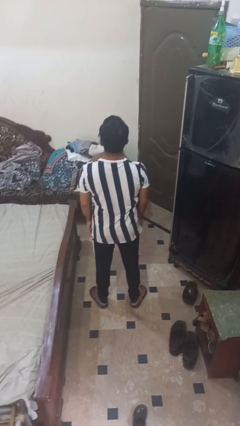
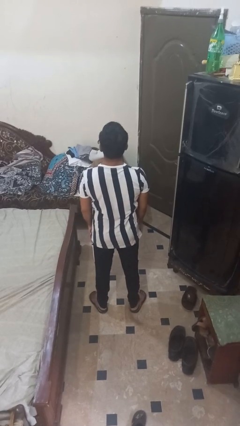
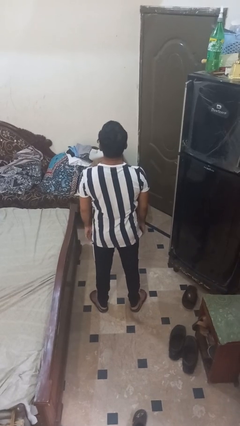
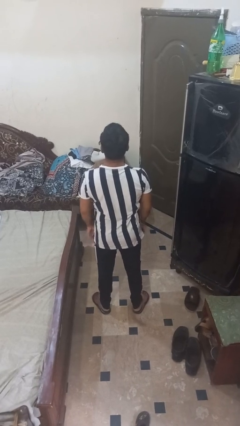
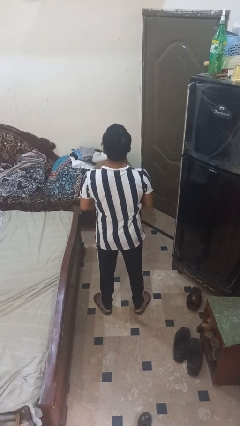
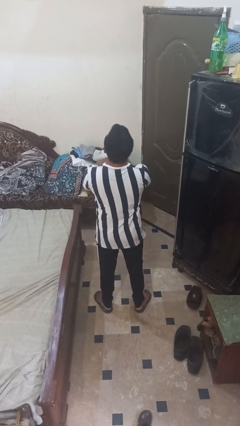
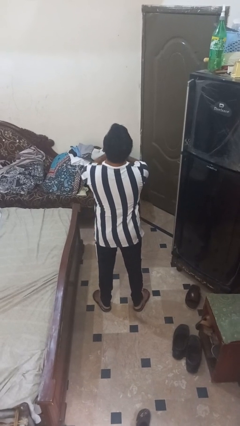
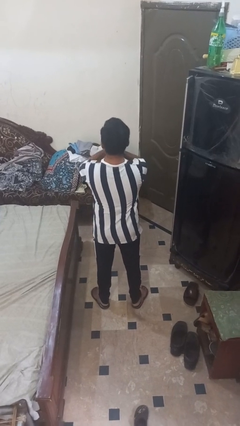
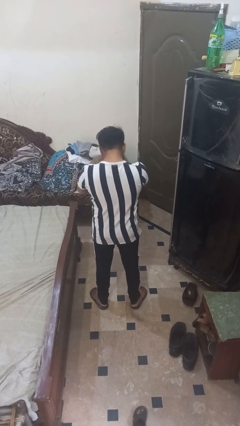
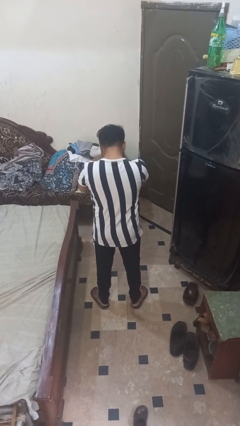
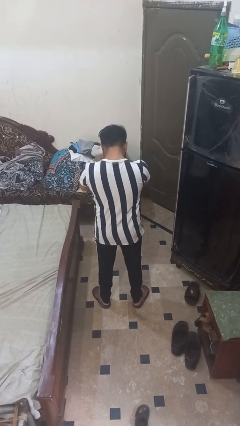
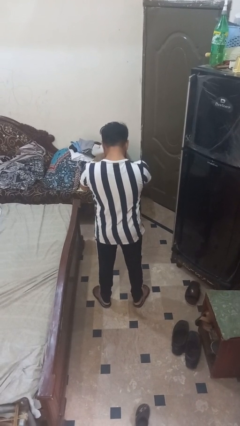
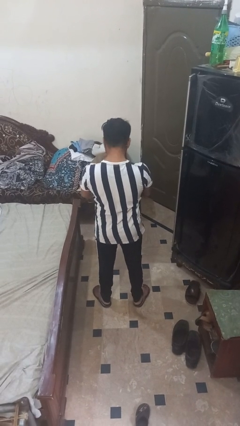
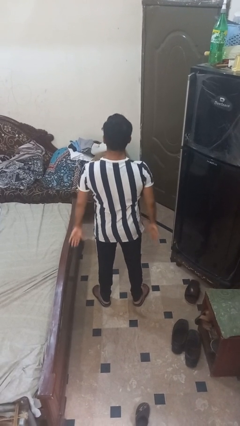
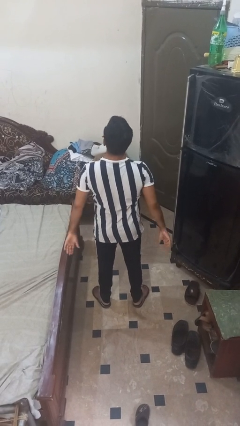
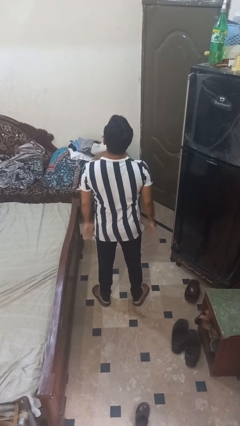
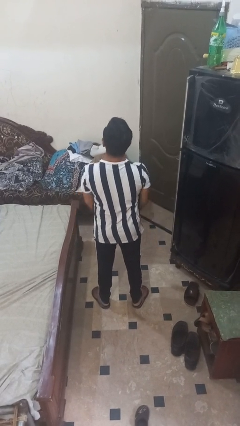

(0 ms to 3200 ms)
person sneezes into hand

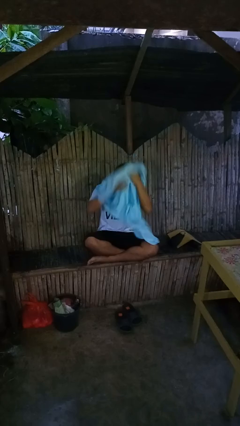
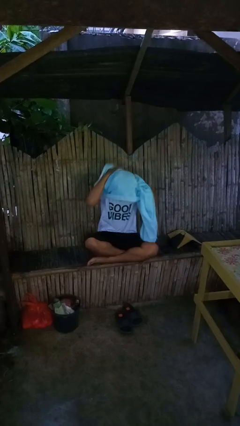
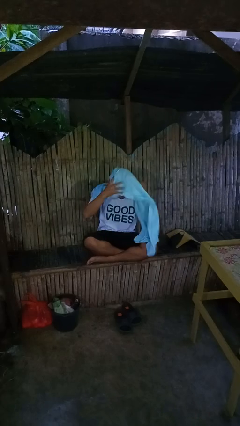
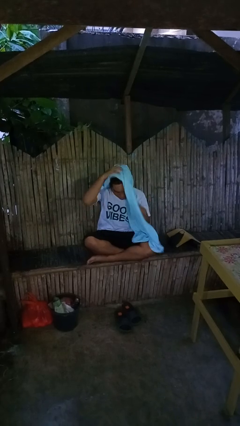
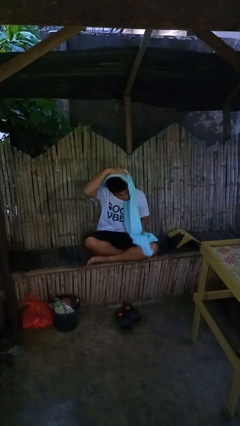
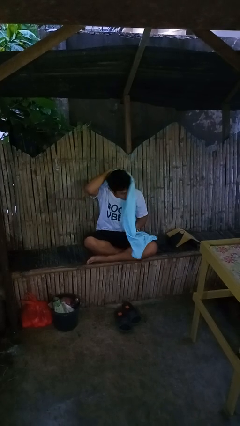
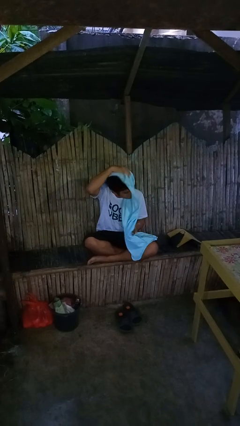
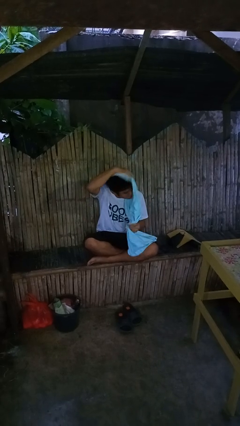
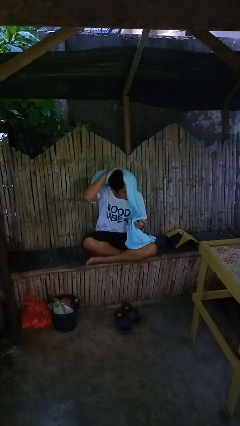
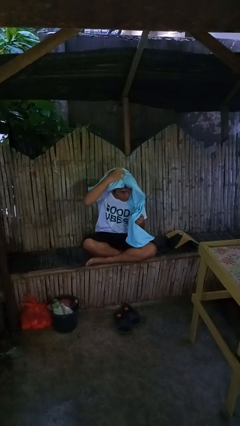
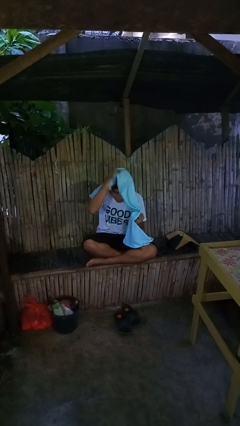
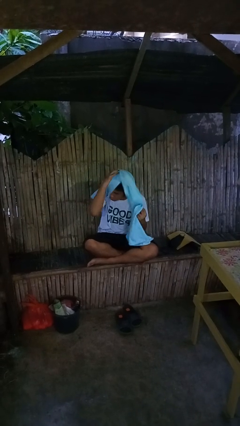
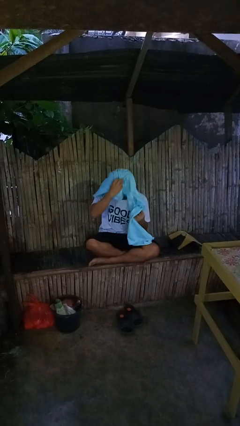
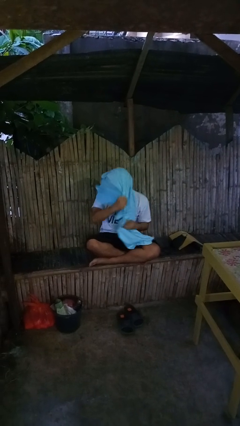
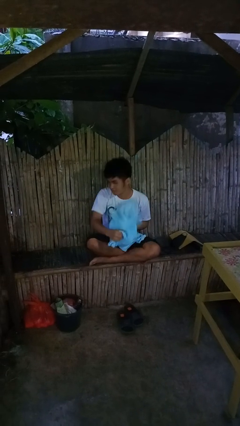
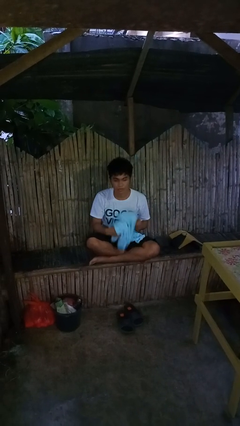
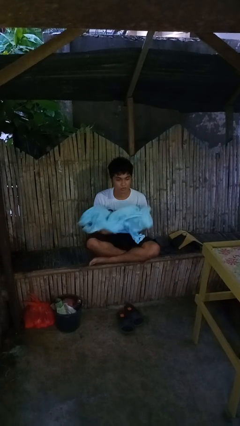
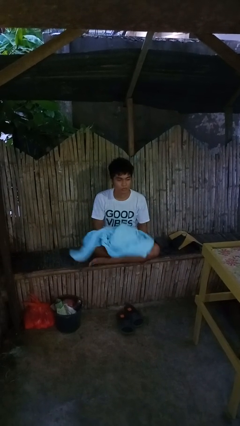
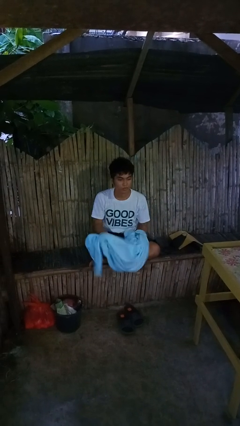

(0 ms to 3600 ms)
person dries hair with towel

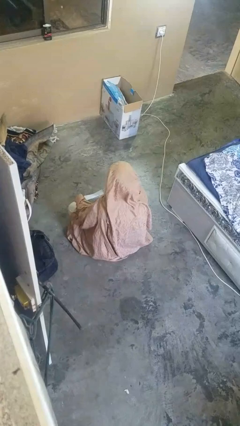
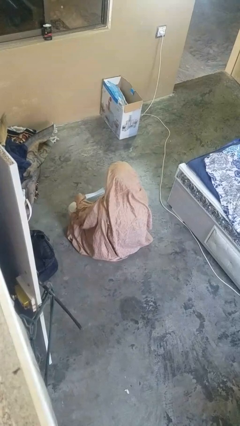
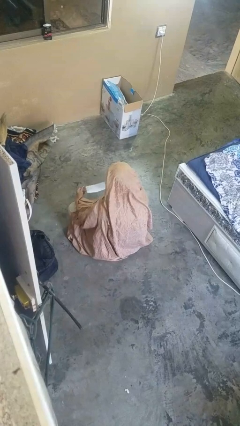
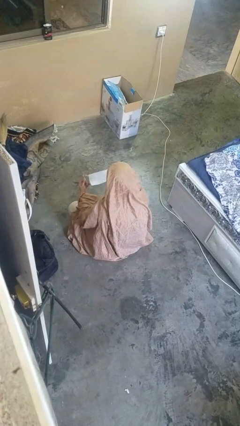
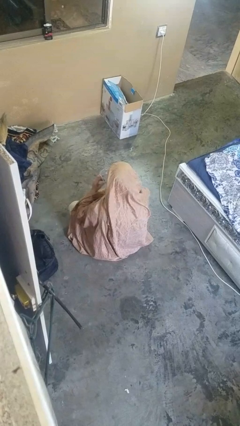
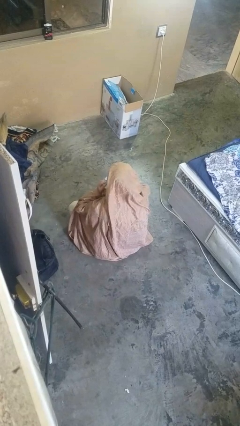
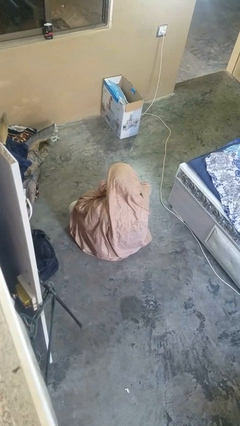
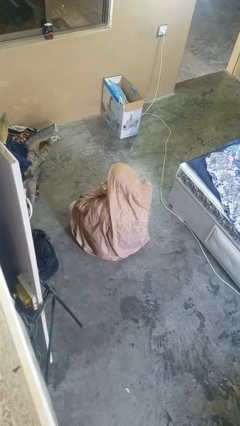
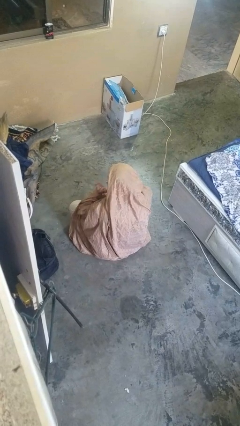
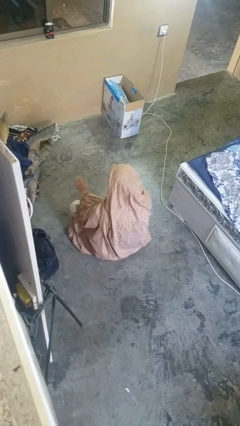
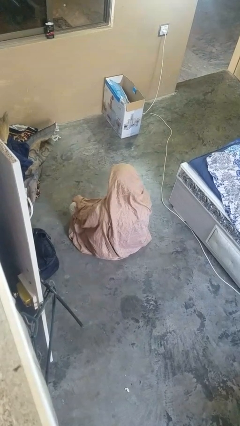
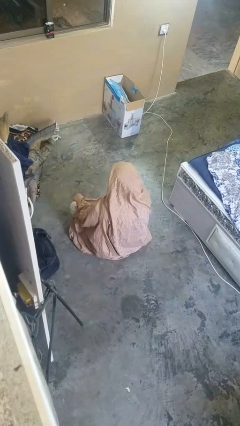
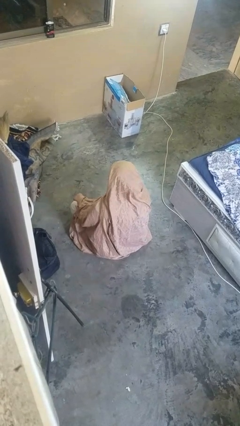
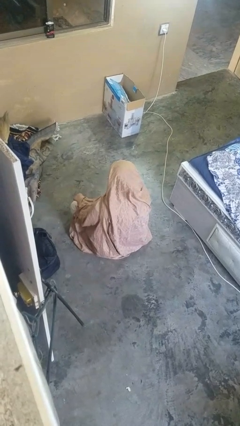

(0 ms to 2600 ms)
person puts on facemask

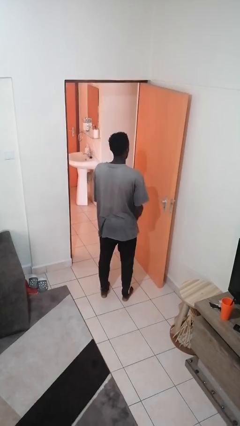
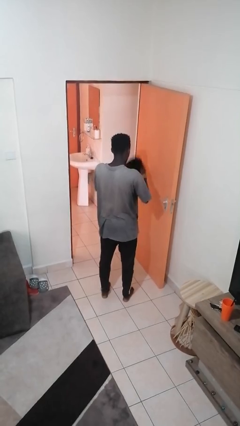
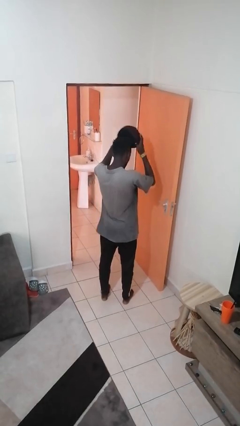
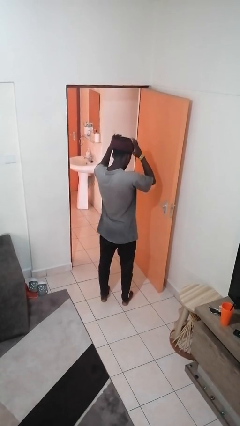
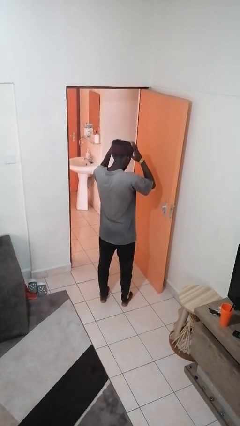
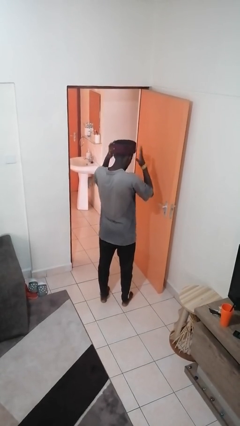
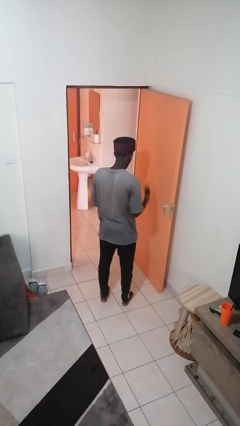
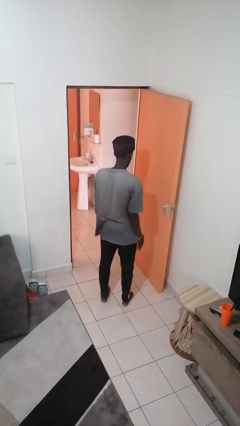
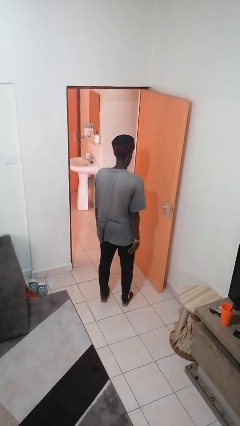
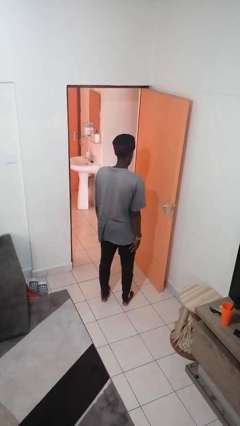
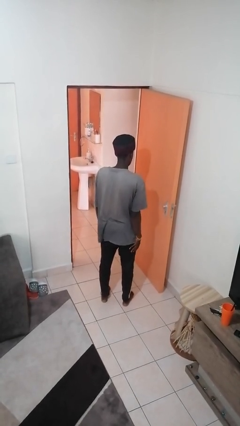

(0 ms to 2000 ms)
person puts on hat

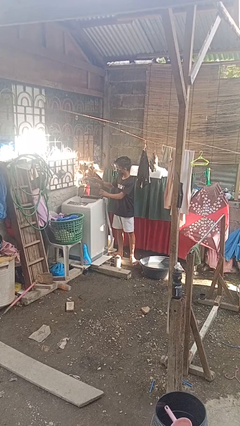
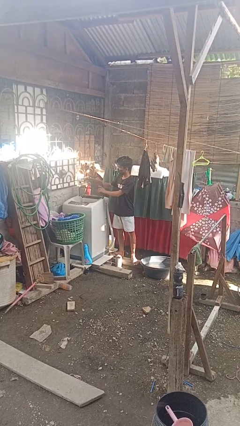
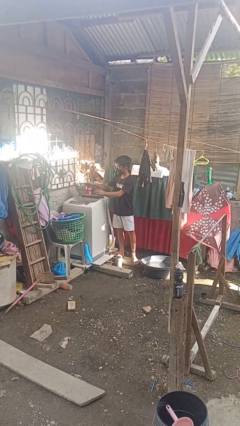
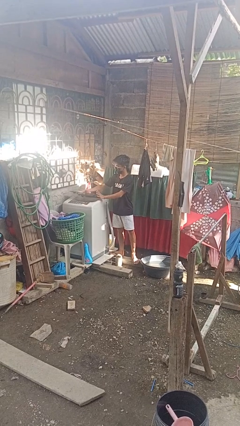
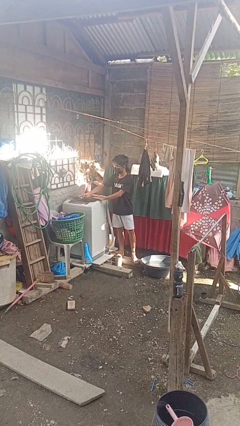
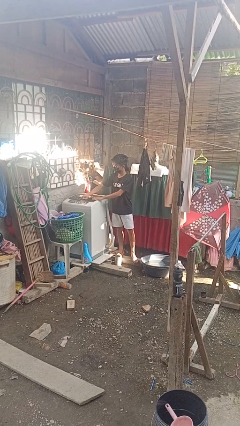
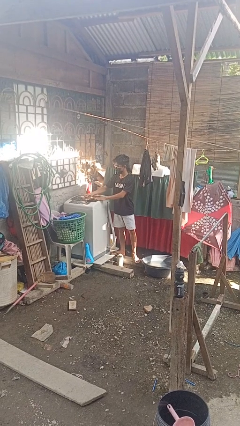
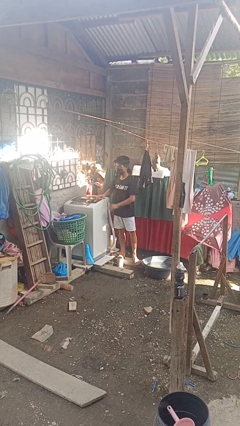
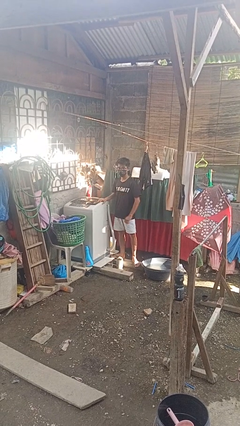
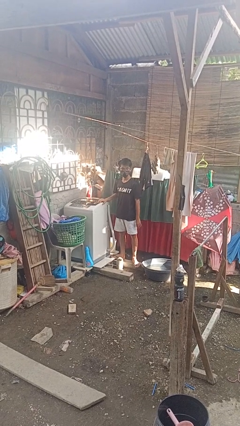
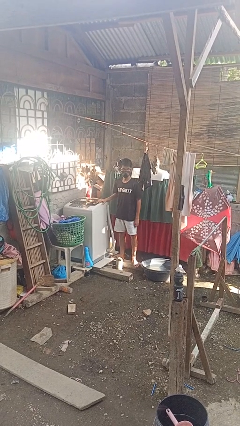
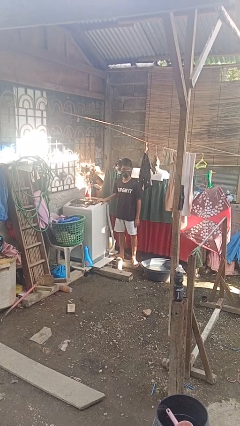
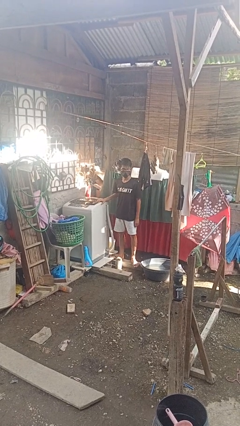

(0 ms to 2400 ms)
person closes clothes washer

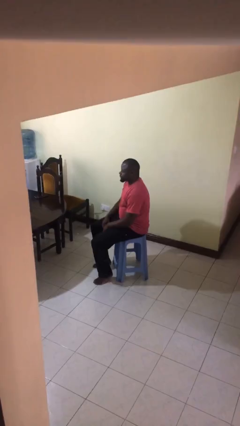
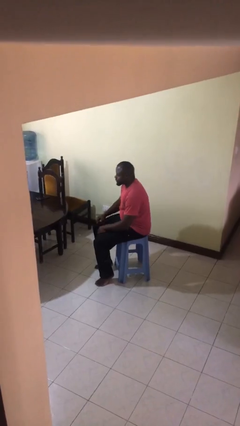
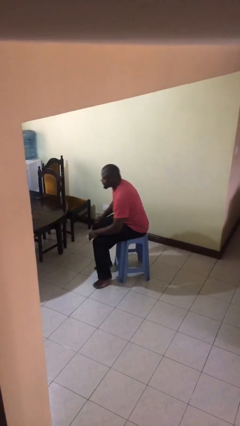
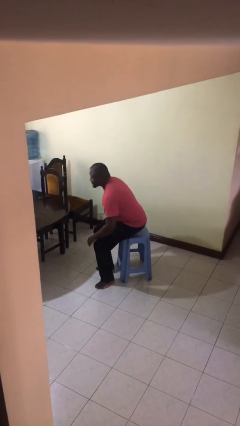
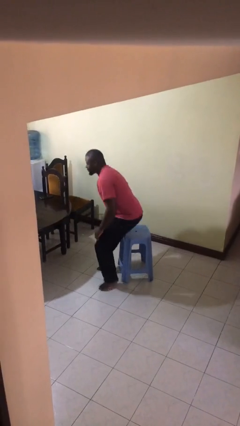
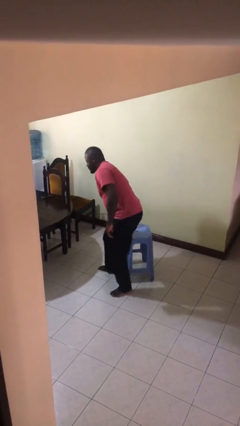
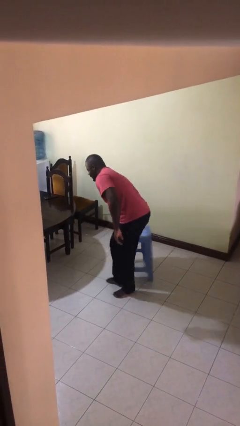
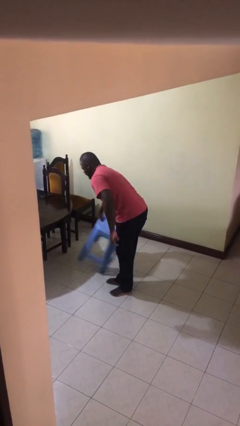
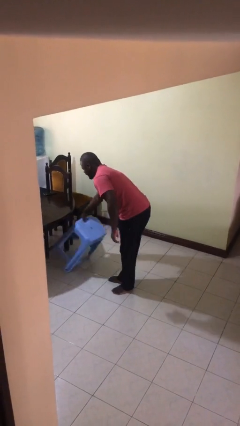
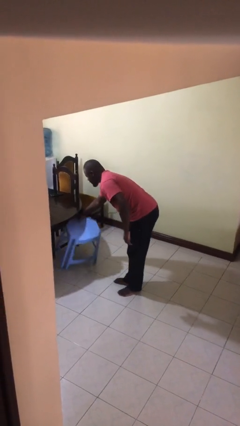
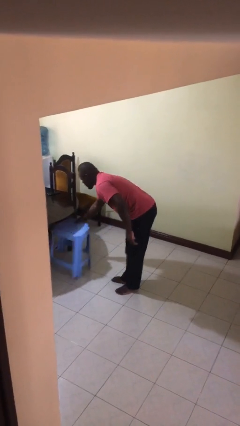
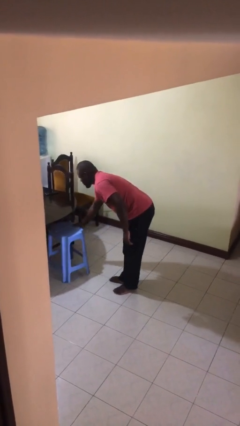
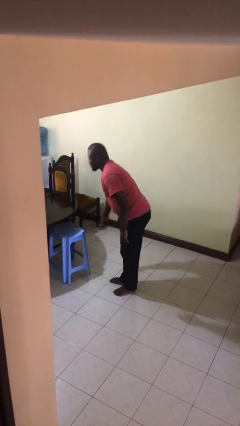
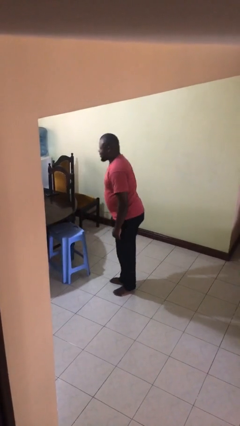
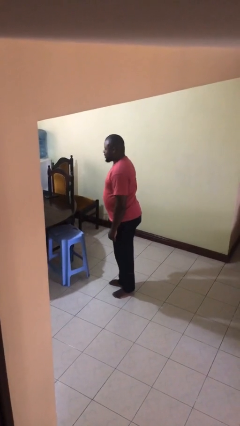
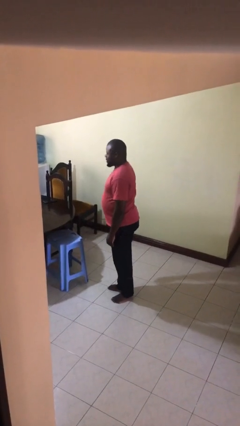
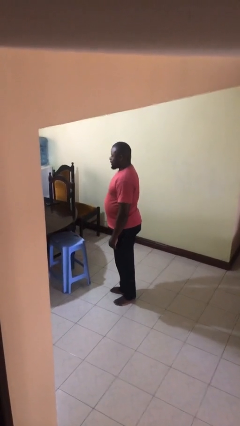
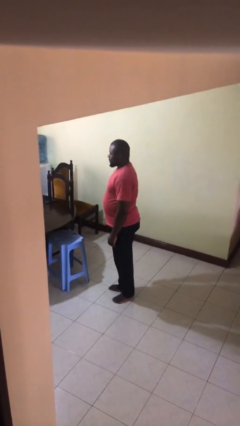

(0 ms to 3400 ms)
person stands up
